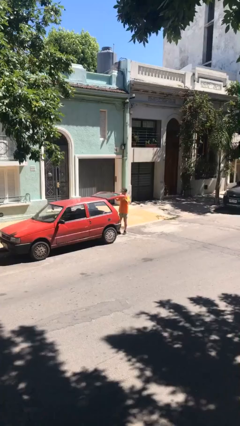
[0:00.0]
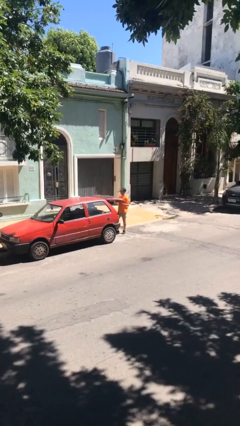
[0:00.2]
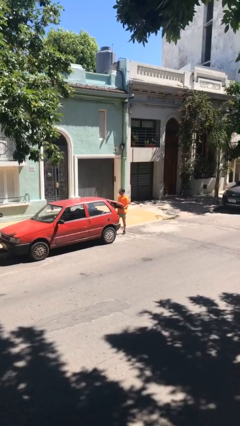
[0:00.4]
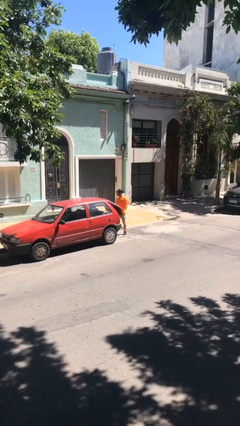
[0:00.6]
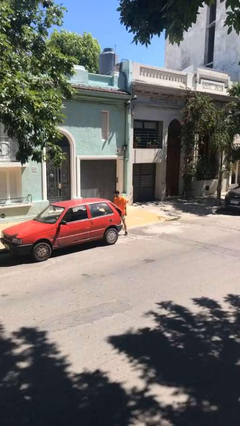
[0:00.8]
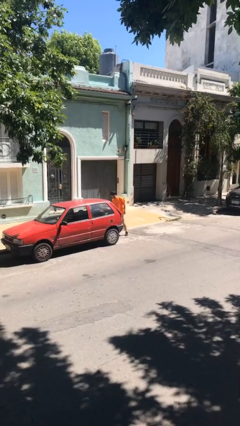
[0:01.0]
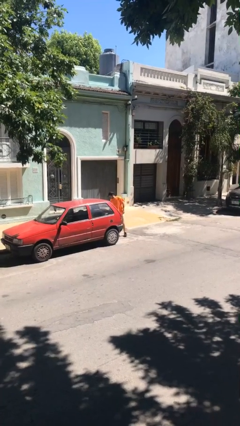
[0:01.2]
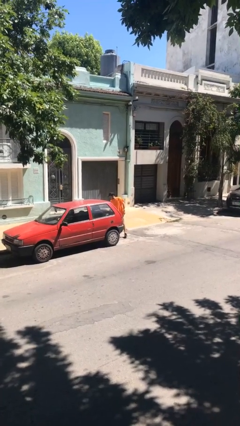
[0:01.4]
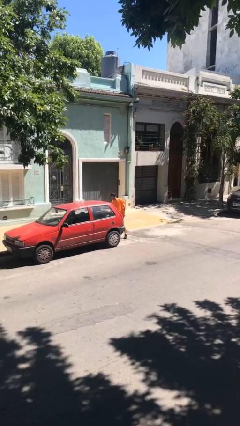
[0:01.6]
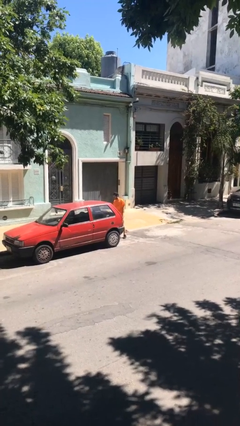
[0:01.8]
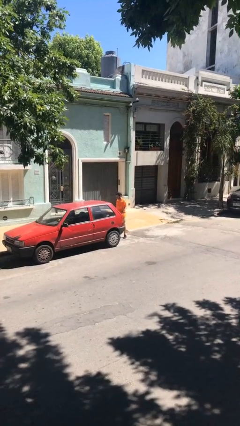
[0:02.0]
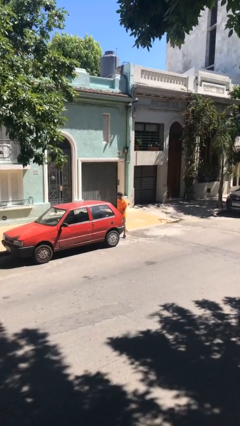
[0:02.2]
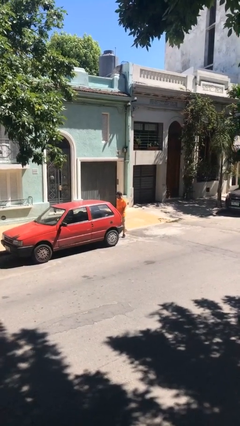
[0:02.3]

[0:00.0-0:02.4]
person closes car trunk

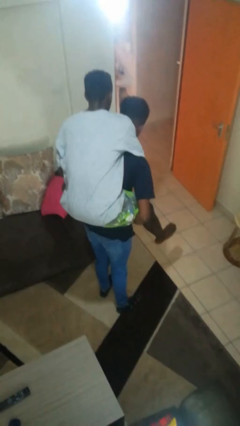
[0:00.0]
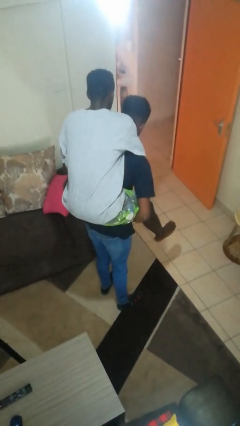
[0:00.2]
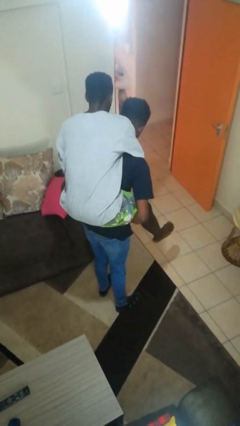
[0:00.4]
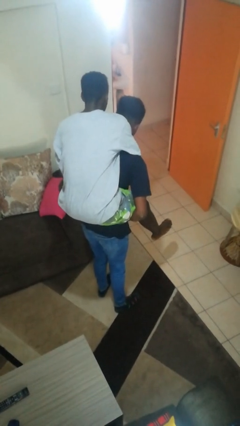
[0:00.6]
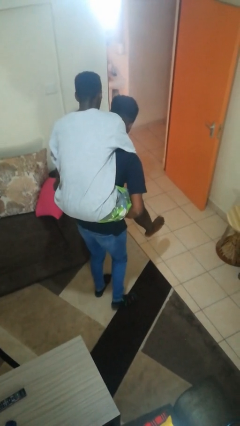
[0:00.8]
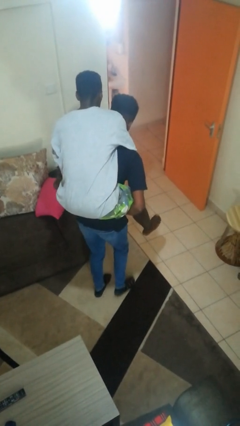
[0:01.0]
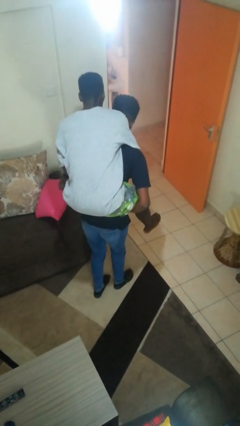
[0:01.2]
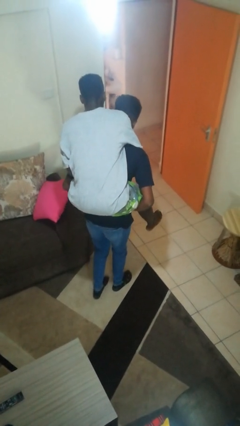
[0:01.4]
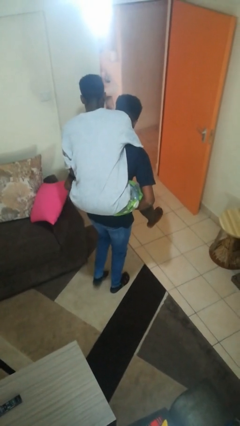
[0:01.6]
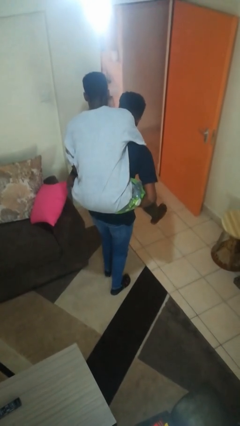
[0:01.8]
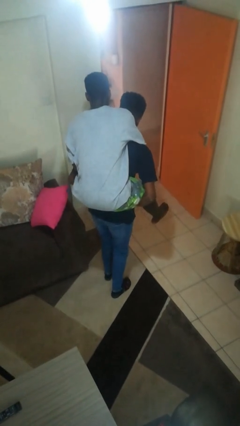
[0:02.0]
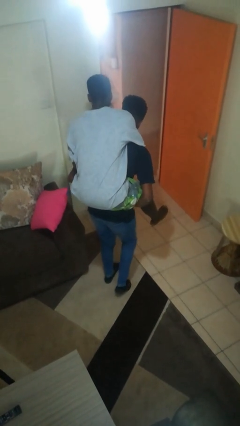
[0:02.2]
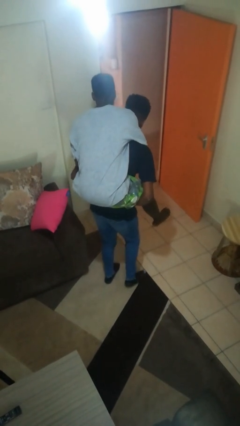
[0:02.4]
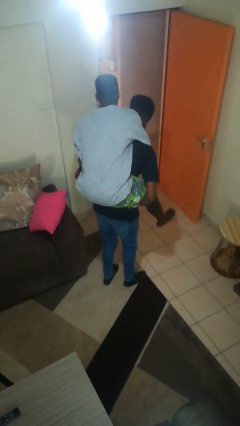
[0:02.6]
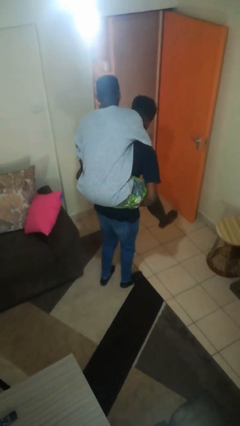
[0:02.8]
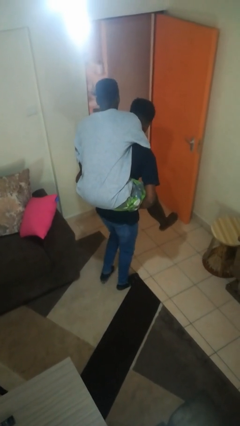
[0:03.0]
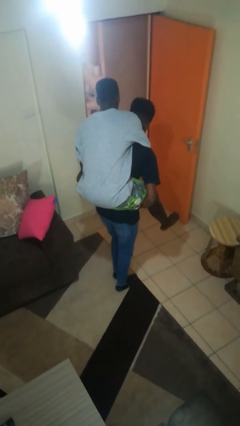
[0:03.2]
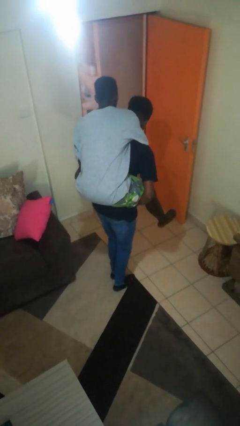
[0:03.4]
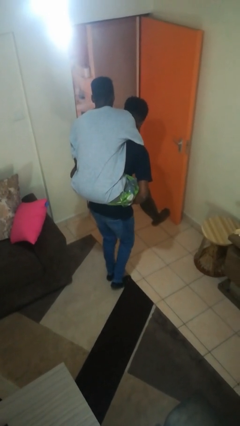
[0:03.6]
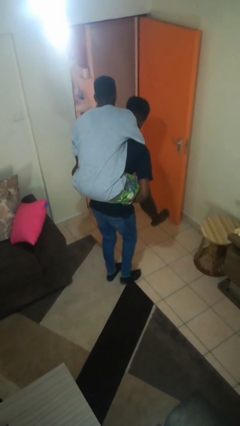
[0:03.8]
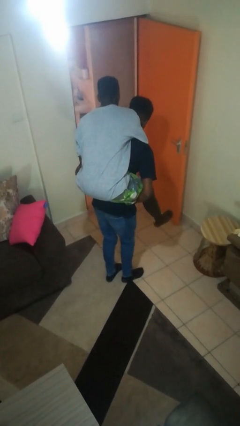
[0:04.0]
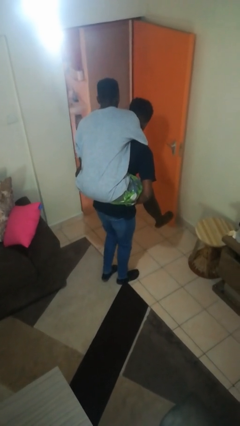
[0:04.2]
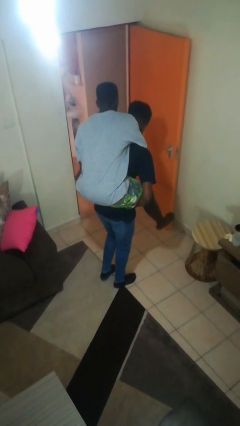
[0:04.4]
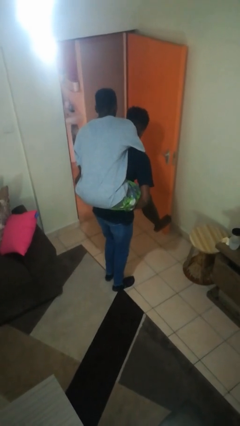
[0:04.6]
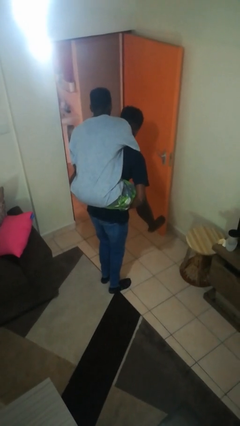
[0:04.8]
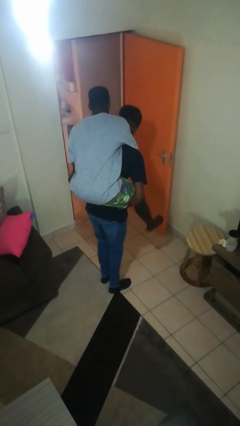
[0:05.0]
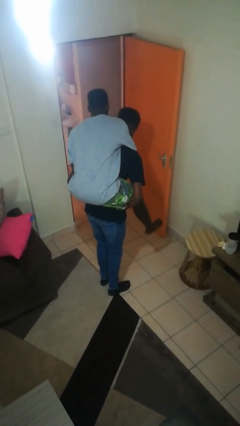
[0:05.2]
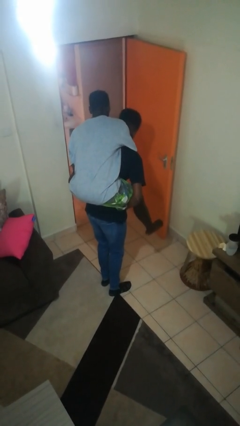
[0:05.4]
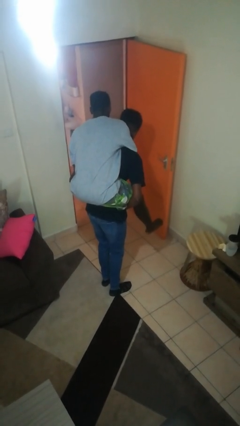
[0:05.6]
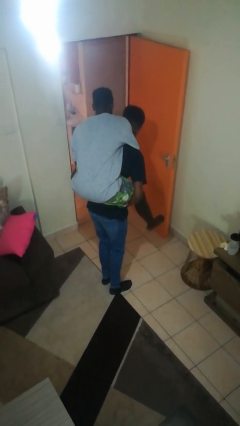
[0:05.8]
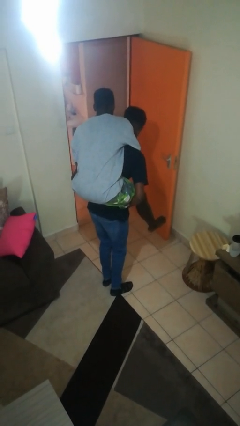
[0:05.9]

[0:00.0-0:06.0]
person carries person on back

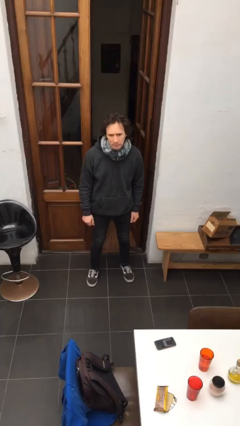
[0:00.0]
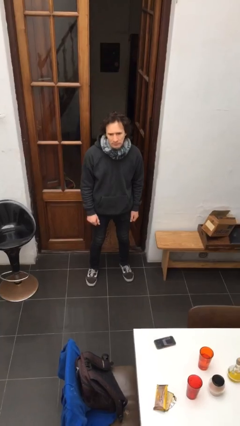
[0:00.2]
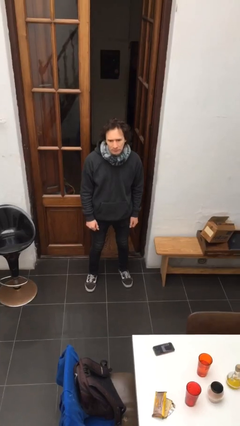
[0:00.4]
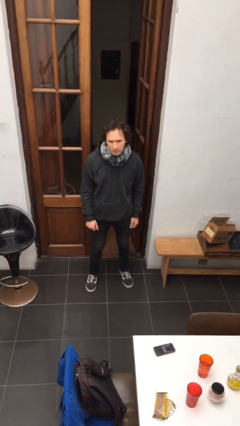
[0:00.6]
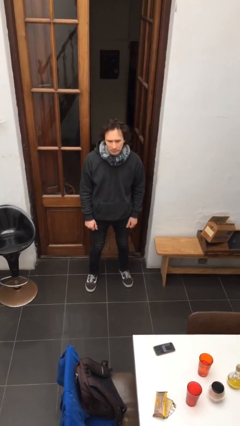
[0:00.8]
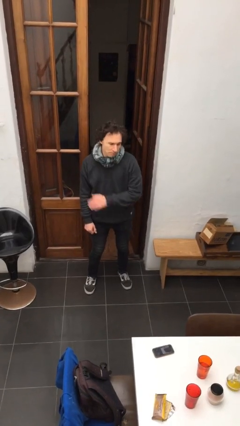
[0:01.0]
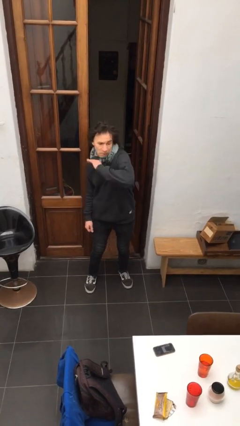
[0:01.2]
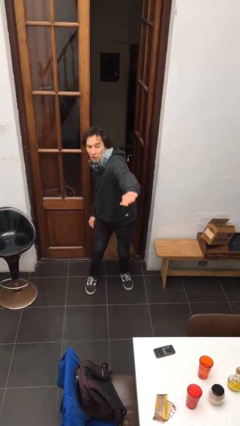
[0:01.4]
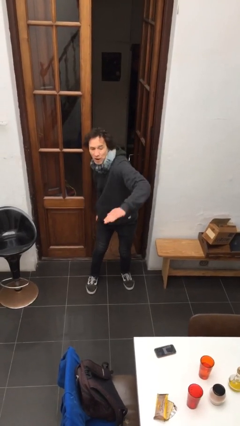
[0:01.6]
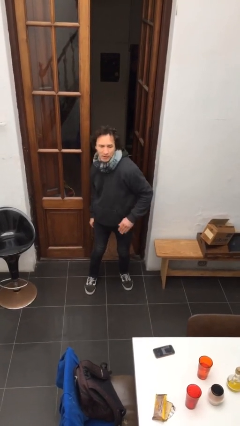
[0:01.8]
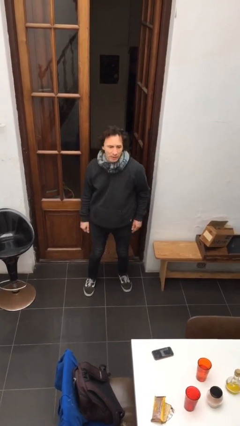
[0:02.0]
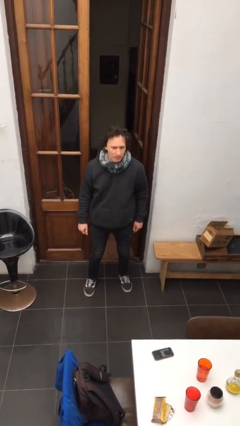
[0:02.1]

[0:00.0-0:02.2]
person karate chop

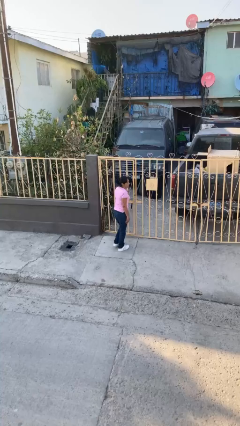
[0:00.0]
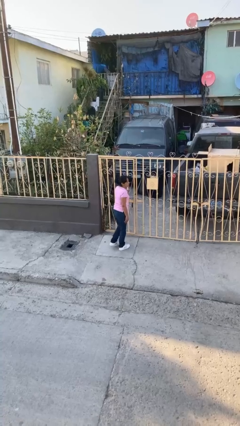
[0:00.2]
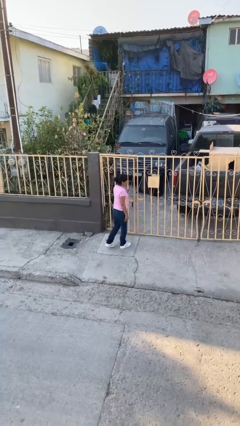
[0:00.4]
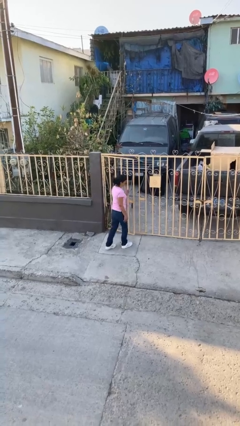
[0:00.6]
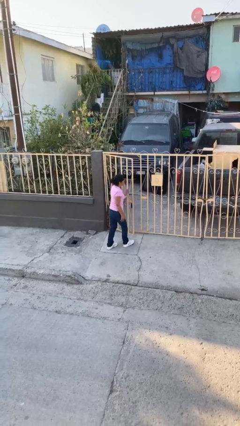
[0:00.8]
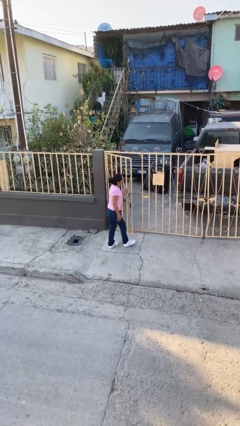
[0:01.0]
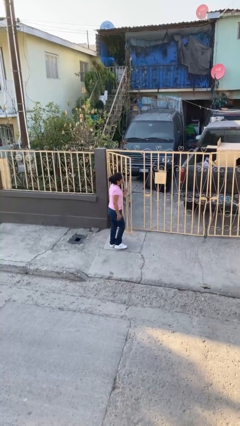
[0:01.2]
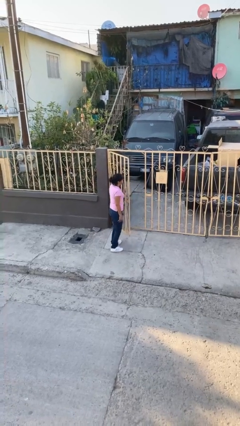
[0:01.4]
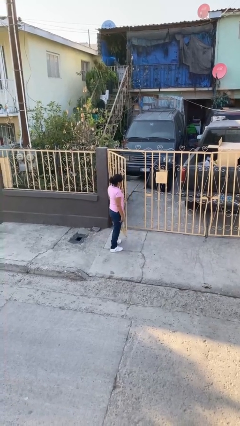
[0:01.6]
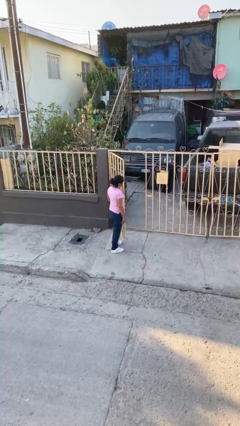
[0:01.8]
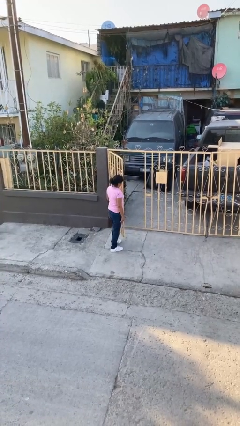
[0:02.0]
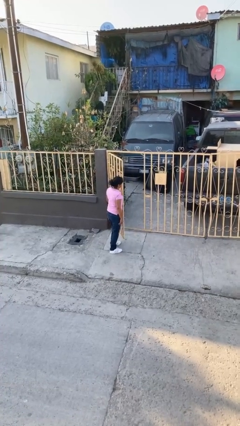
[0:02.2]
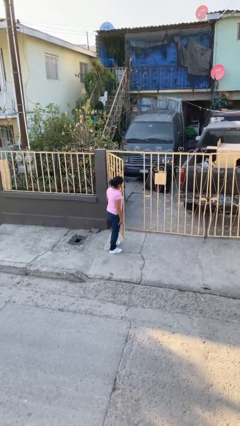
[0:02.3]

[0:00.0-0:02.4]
person opens facility door

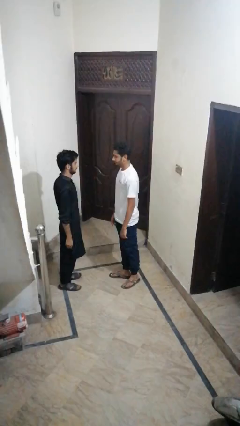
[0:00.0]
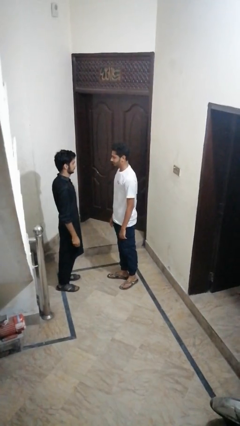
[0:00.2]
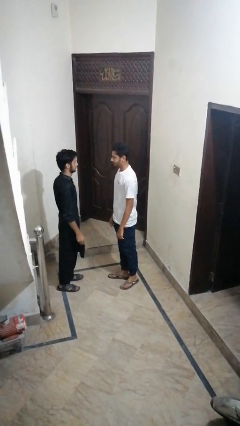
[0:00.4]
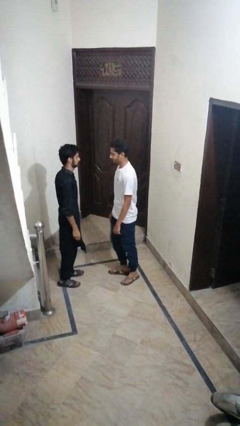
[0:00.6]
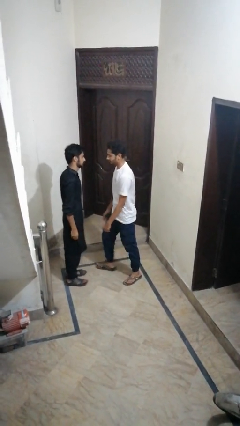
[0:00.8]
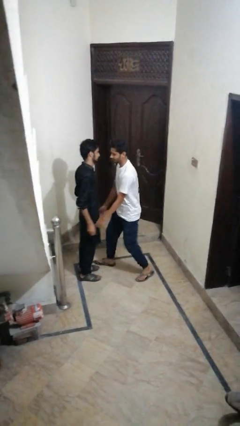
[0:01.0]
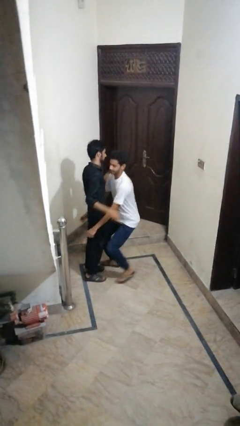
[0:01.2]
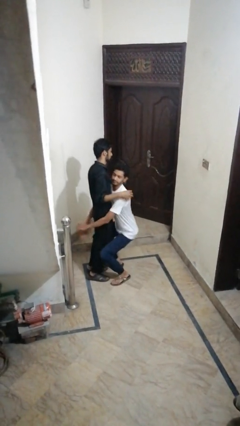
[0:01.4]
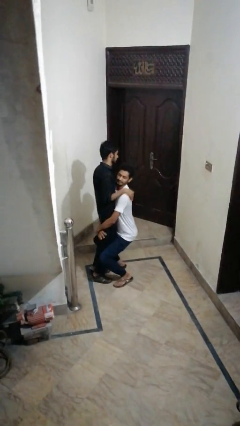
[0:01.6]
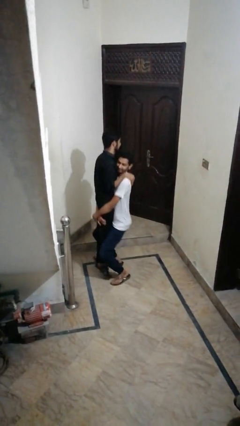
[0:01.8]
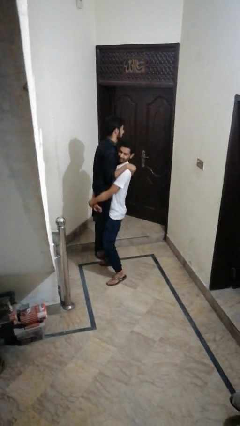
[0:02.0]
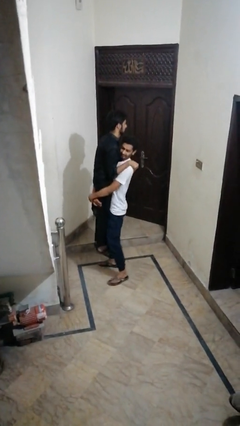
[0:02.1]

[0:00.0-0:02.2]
person puts on facemask

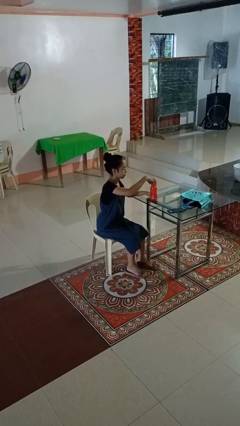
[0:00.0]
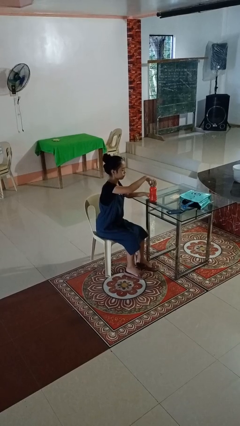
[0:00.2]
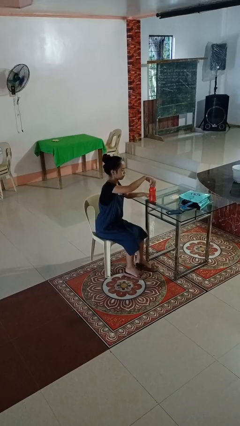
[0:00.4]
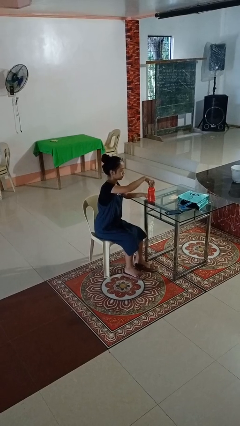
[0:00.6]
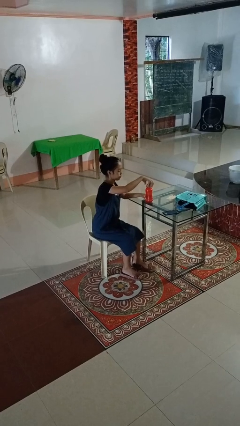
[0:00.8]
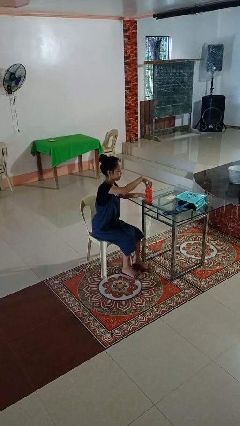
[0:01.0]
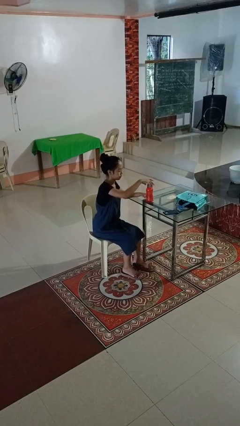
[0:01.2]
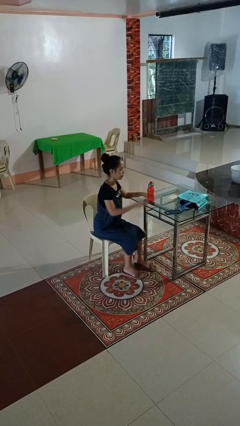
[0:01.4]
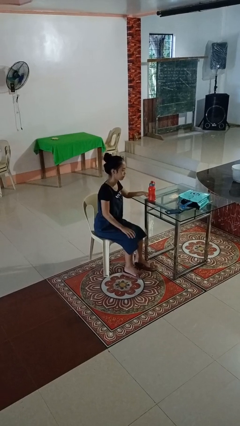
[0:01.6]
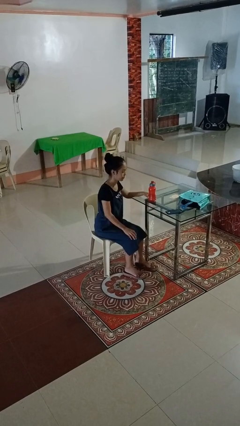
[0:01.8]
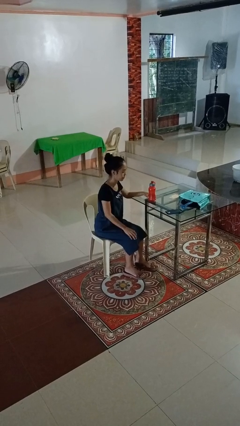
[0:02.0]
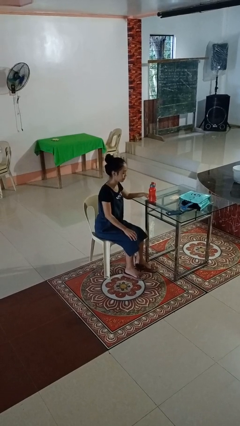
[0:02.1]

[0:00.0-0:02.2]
person screws lid to bottle
